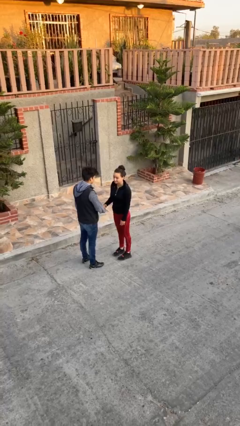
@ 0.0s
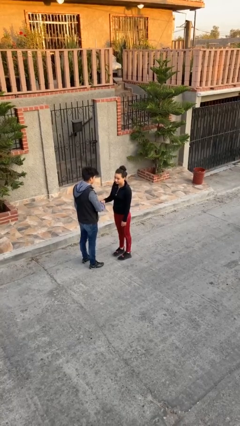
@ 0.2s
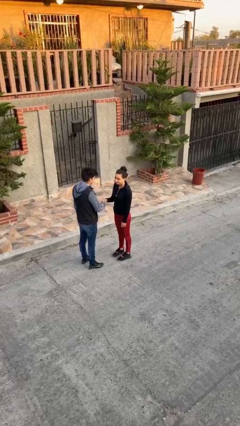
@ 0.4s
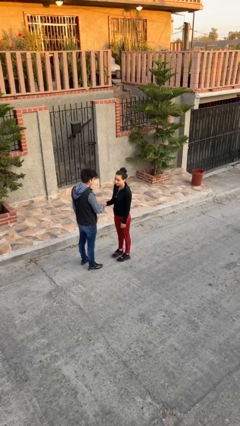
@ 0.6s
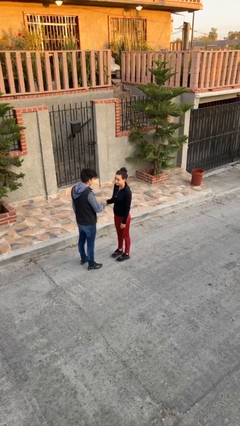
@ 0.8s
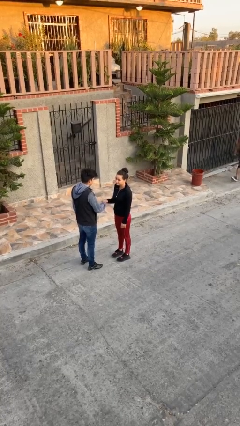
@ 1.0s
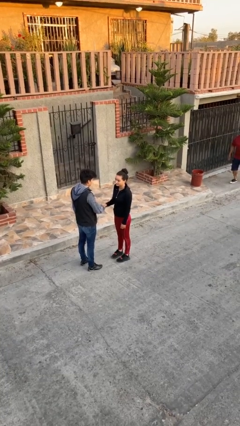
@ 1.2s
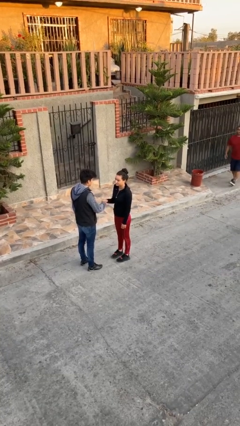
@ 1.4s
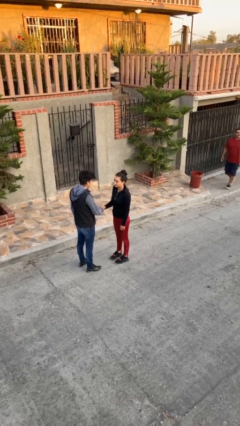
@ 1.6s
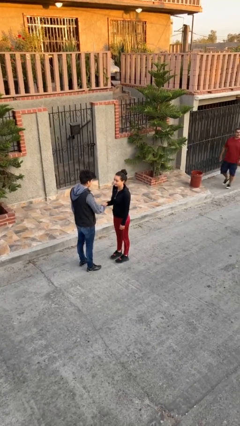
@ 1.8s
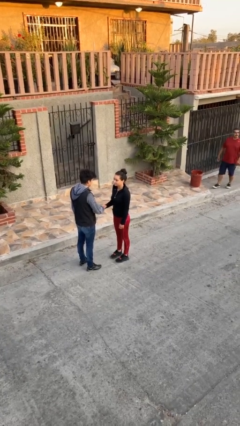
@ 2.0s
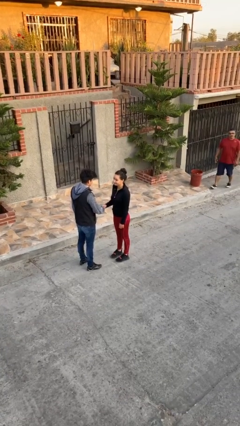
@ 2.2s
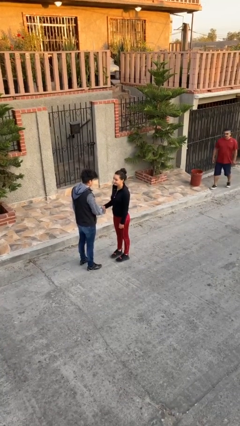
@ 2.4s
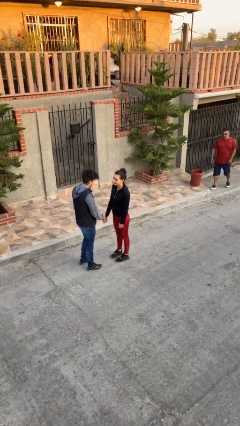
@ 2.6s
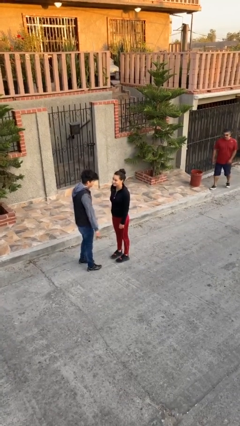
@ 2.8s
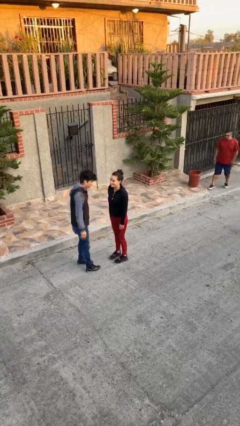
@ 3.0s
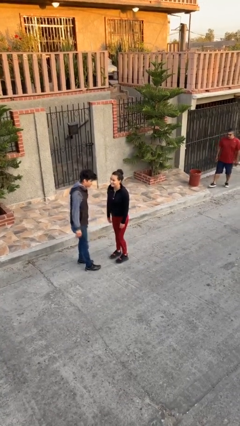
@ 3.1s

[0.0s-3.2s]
person shakes hand

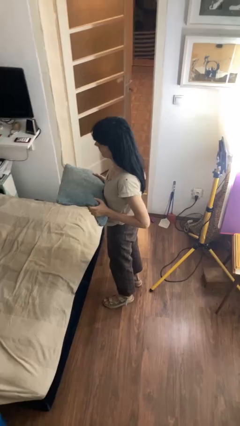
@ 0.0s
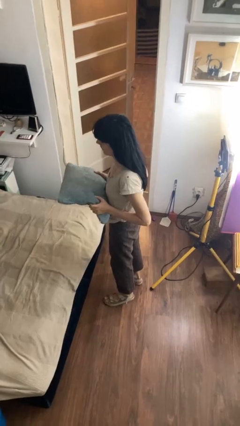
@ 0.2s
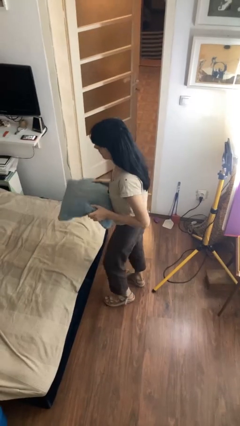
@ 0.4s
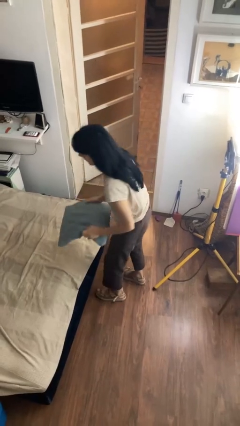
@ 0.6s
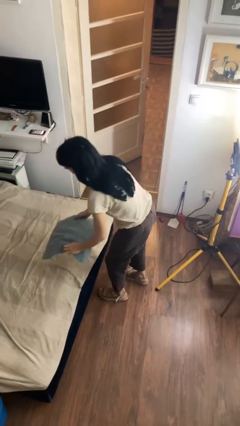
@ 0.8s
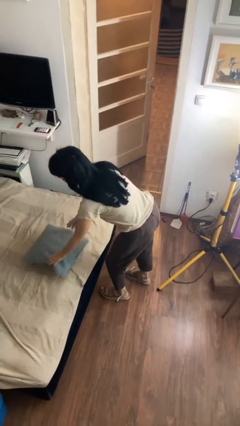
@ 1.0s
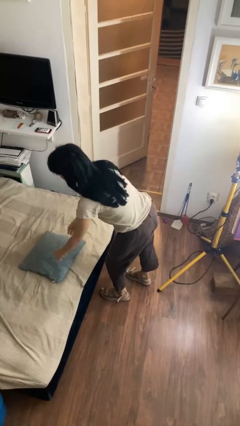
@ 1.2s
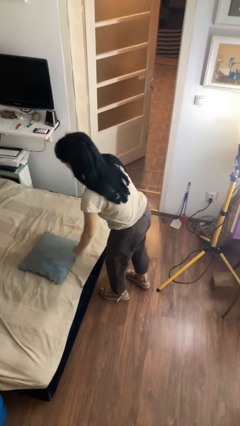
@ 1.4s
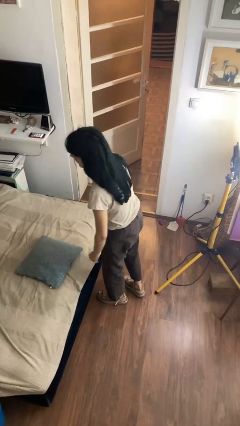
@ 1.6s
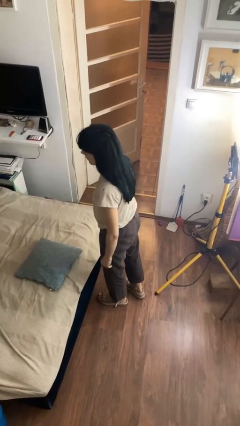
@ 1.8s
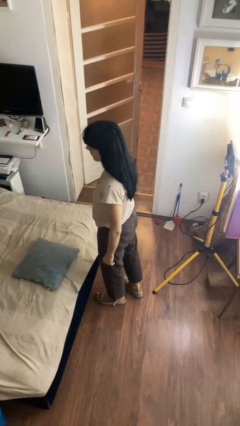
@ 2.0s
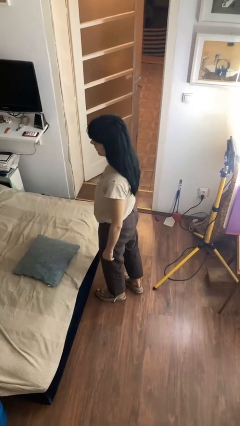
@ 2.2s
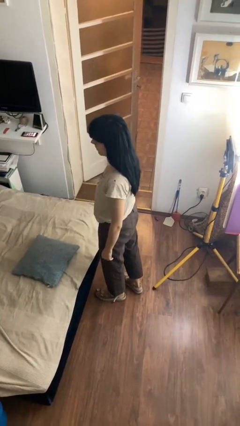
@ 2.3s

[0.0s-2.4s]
person puts down object on bed

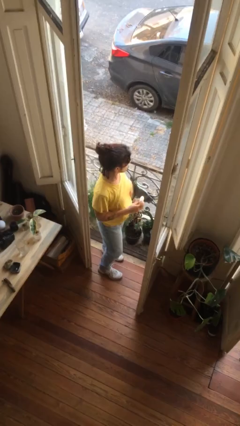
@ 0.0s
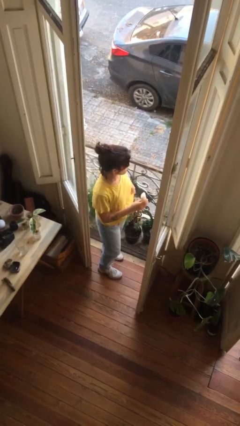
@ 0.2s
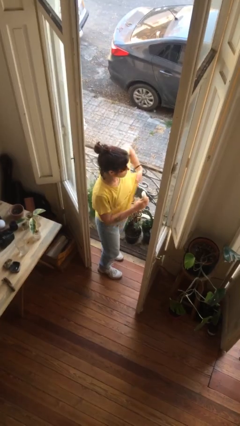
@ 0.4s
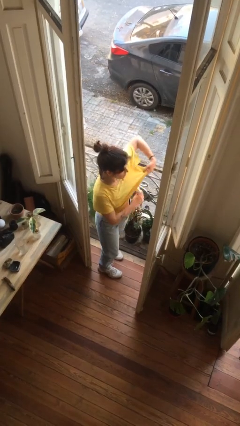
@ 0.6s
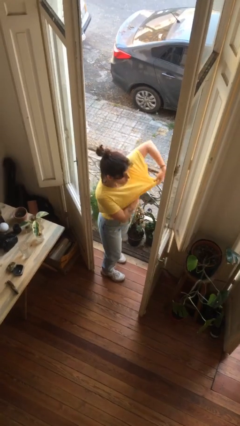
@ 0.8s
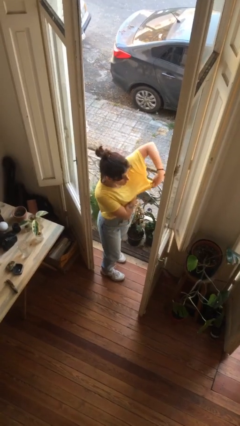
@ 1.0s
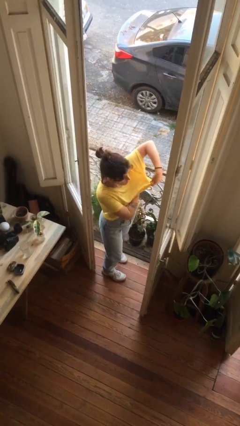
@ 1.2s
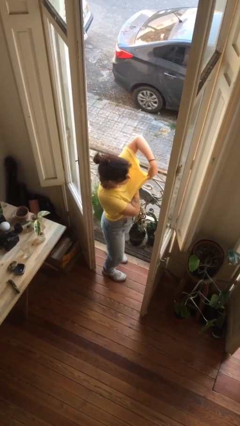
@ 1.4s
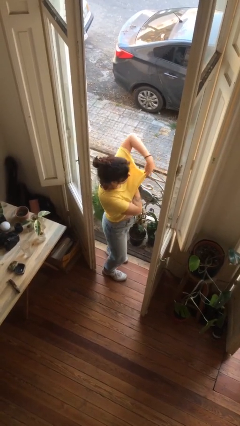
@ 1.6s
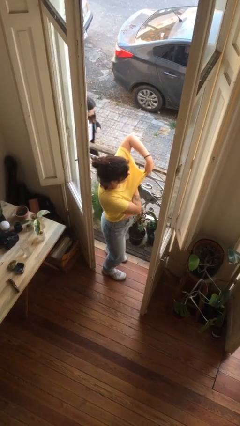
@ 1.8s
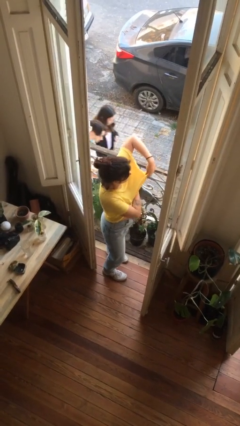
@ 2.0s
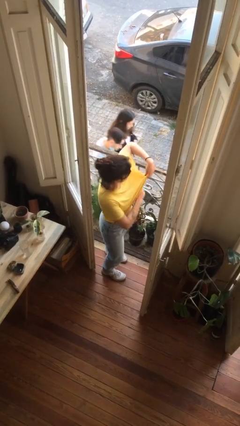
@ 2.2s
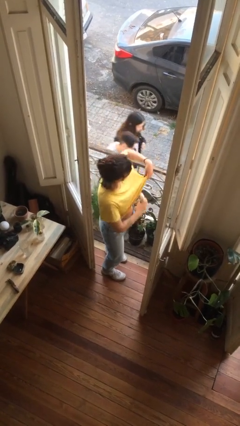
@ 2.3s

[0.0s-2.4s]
person applies deodorant

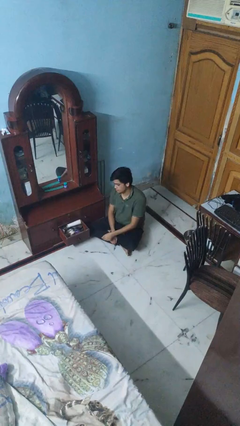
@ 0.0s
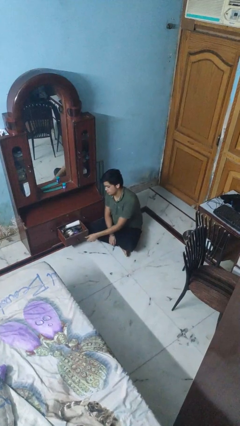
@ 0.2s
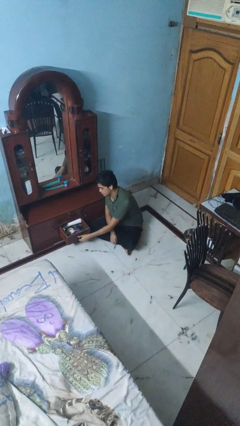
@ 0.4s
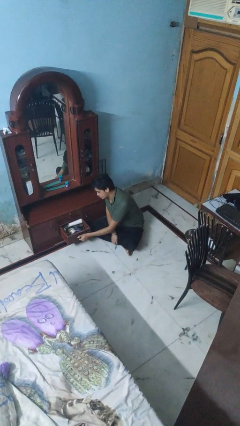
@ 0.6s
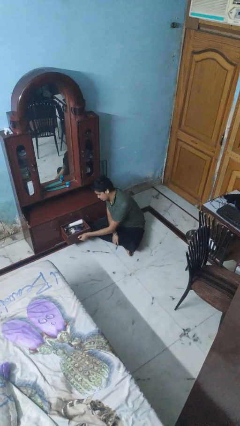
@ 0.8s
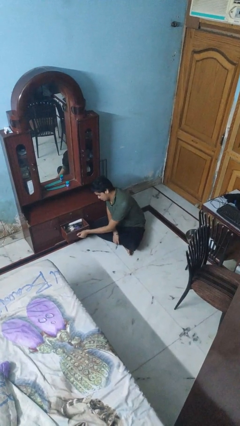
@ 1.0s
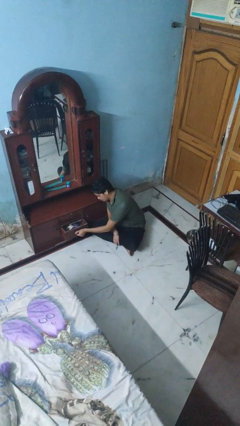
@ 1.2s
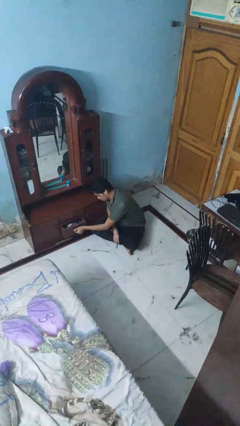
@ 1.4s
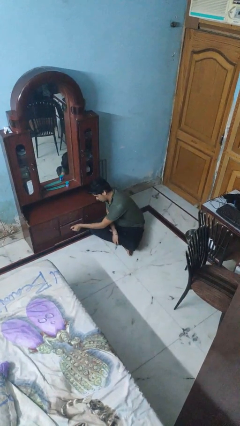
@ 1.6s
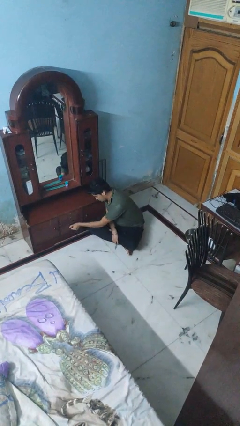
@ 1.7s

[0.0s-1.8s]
person closes dresser drawer

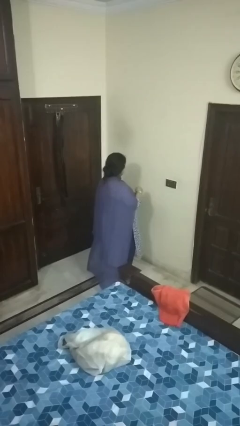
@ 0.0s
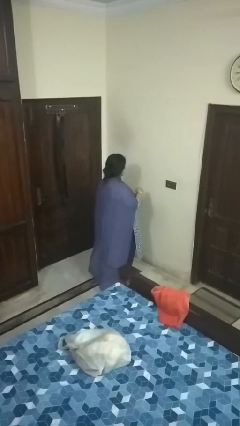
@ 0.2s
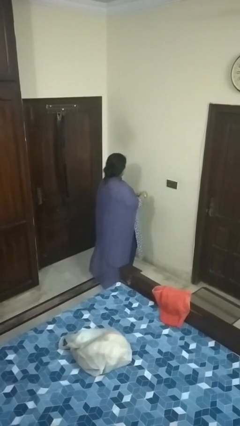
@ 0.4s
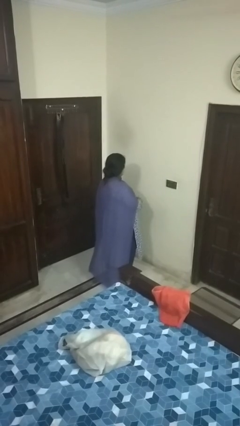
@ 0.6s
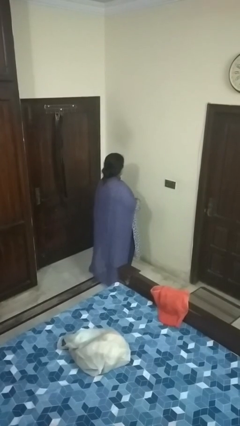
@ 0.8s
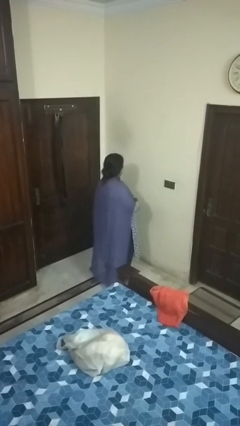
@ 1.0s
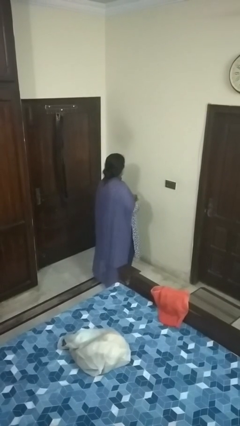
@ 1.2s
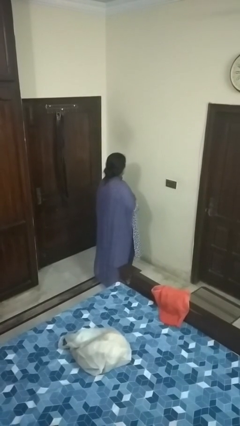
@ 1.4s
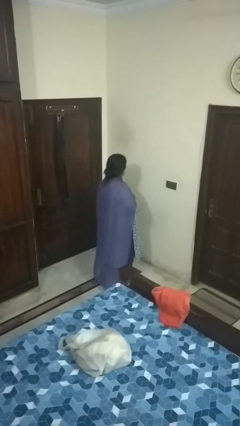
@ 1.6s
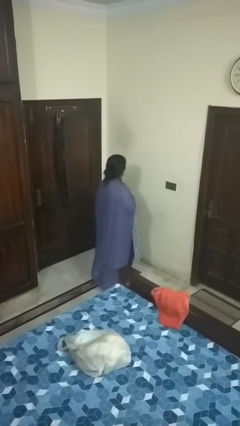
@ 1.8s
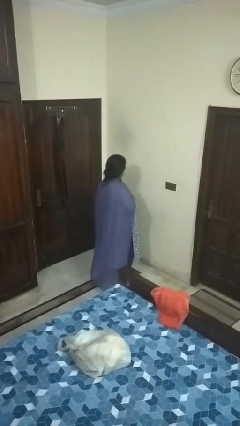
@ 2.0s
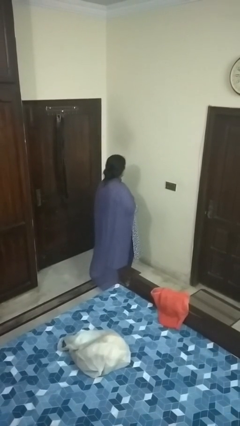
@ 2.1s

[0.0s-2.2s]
person takes off wristwatch

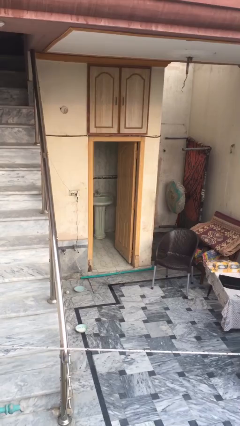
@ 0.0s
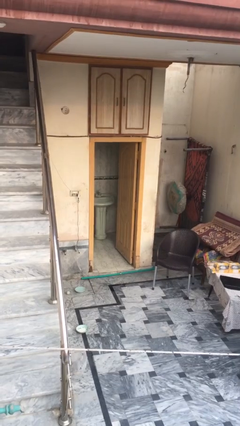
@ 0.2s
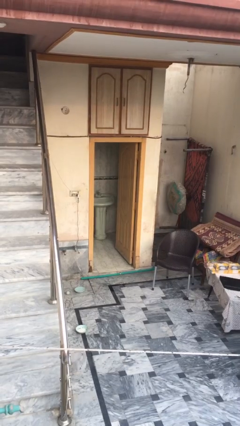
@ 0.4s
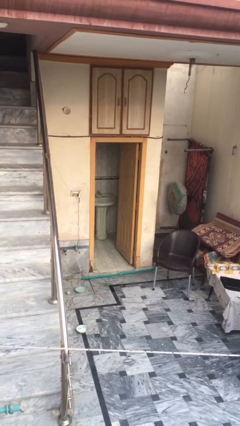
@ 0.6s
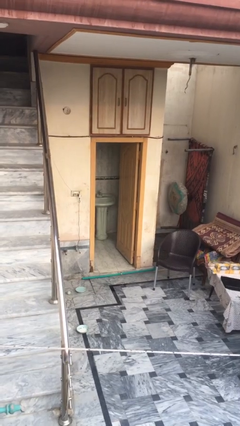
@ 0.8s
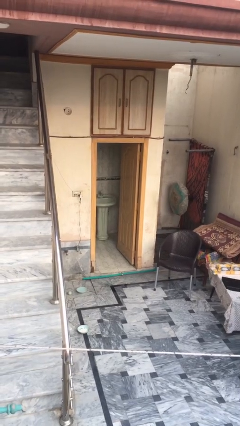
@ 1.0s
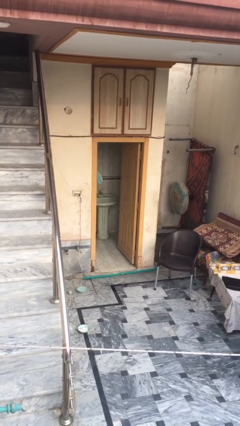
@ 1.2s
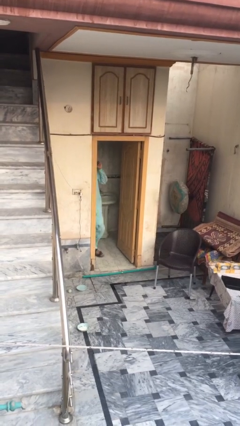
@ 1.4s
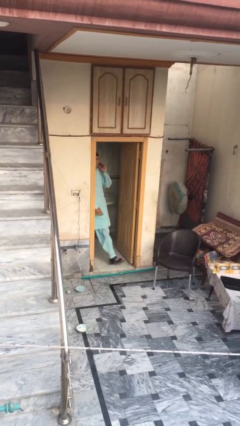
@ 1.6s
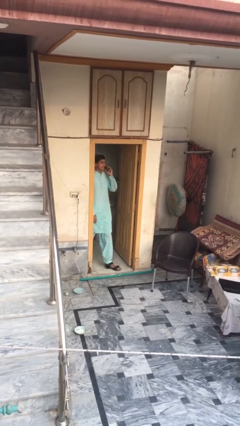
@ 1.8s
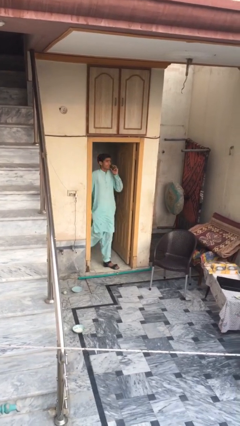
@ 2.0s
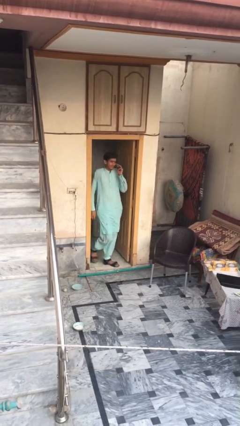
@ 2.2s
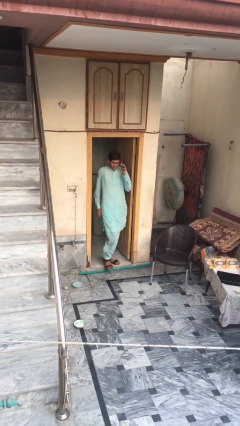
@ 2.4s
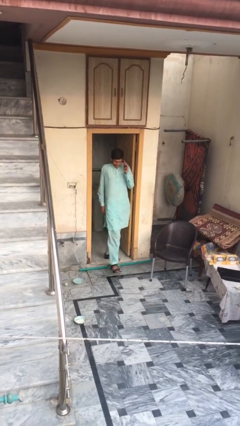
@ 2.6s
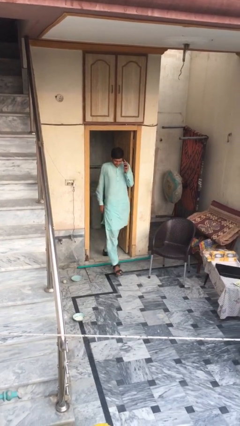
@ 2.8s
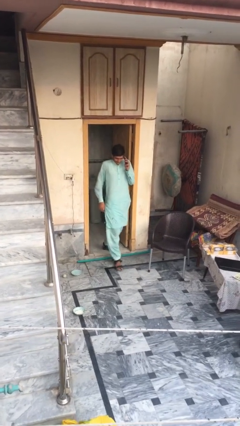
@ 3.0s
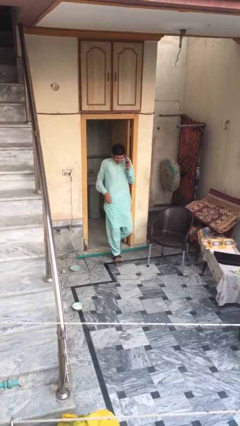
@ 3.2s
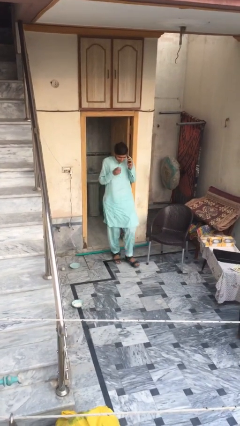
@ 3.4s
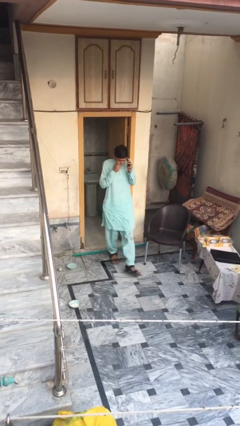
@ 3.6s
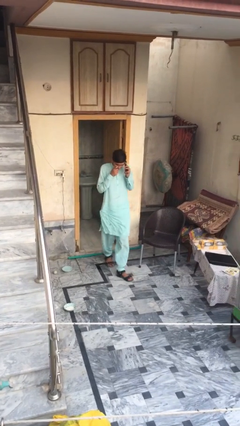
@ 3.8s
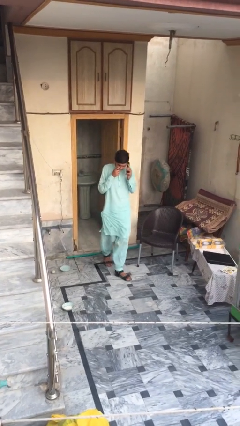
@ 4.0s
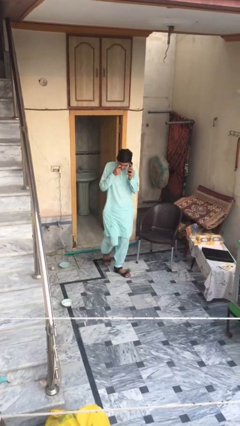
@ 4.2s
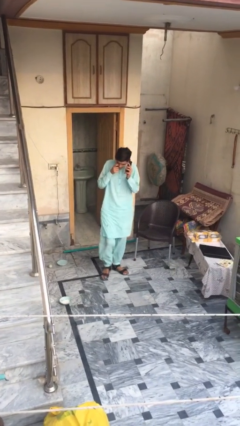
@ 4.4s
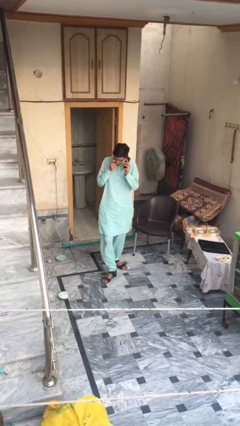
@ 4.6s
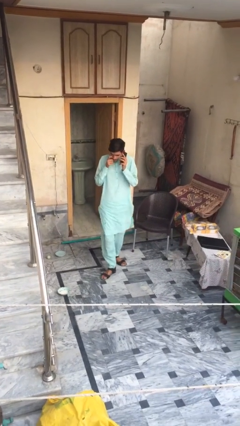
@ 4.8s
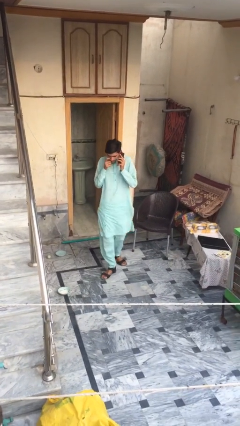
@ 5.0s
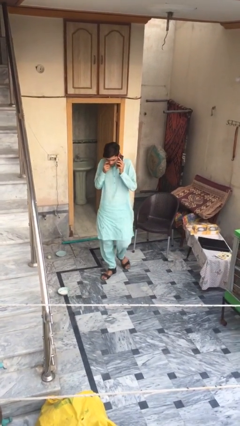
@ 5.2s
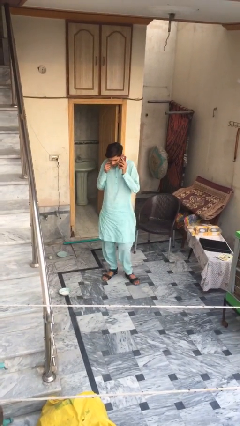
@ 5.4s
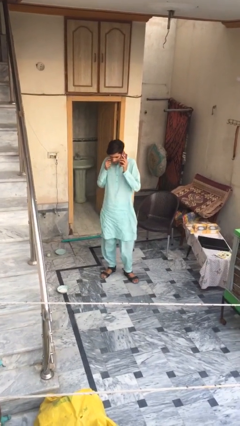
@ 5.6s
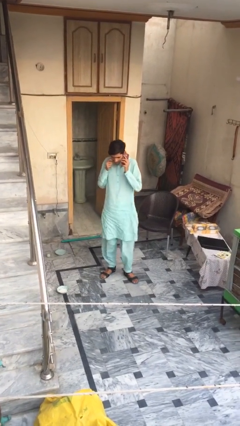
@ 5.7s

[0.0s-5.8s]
person enters scene through structure
